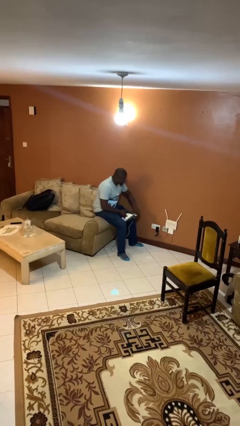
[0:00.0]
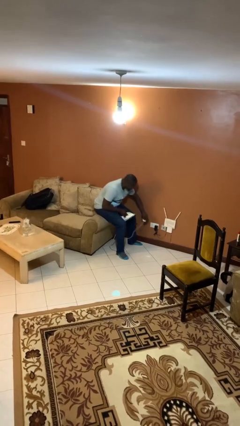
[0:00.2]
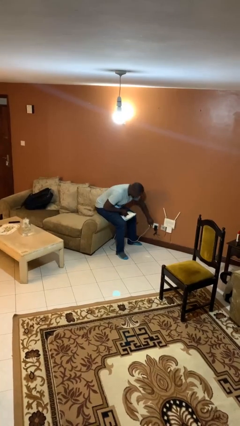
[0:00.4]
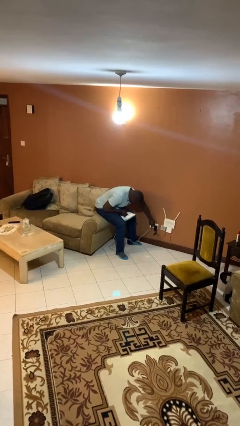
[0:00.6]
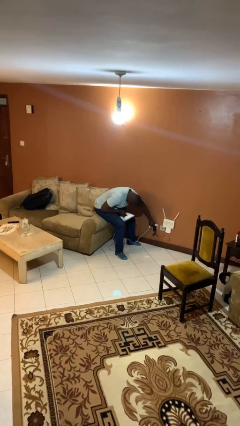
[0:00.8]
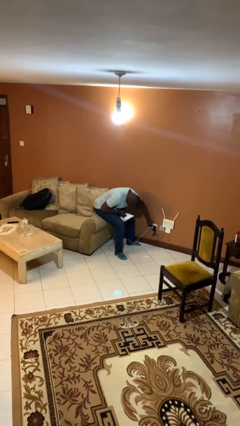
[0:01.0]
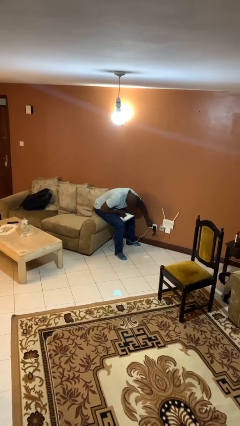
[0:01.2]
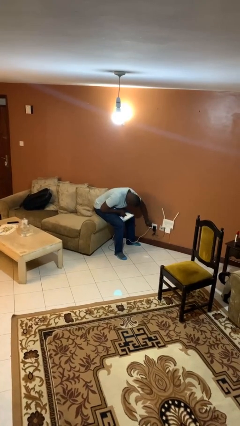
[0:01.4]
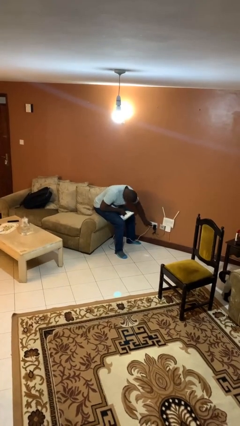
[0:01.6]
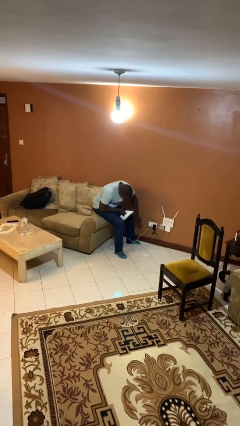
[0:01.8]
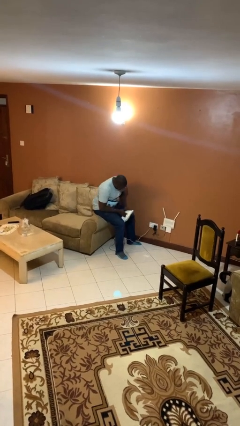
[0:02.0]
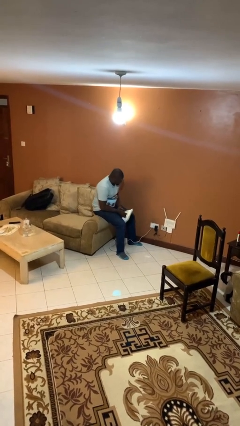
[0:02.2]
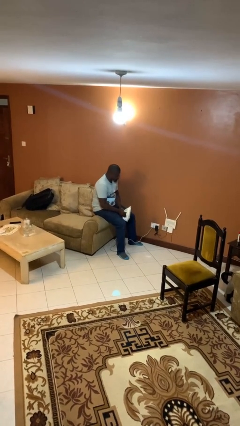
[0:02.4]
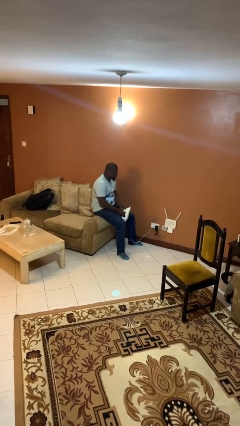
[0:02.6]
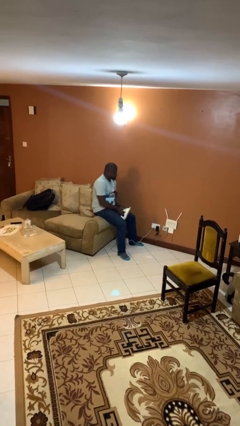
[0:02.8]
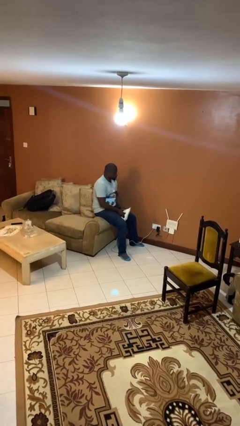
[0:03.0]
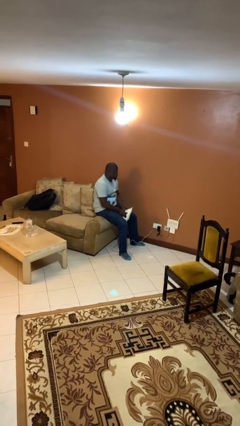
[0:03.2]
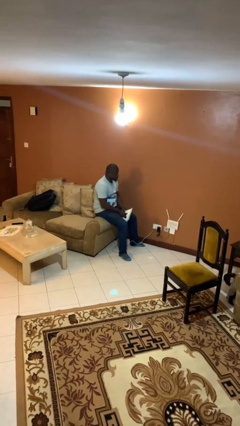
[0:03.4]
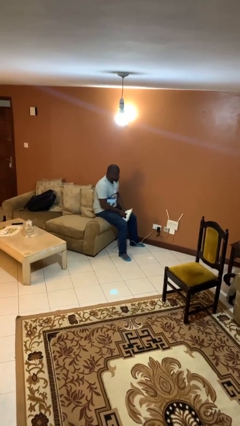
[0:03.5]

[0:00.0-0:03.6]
person plugs into electrical socket

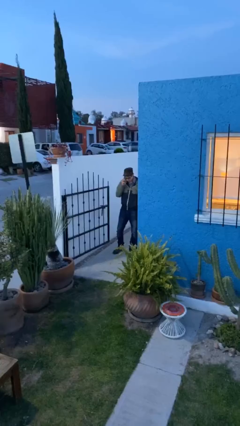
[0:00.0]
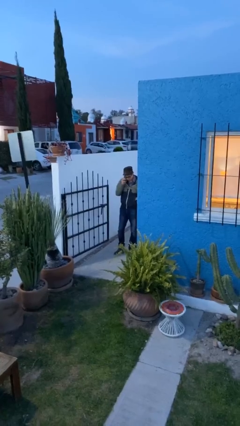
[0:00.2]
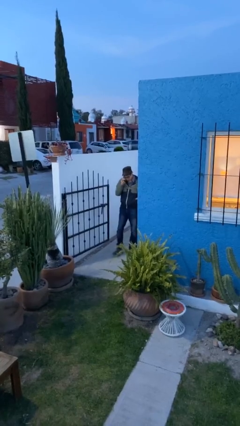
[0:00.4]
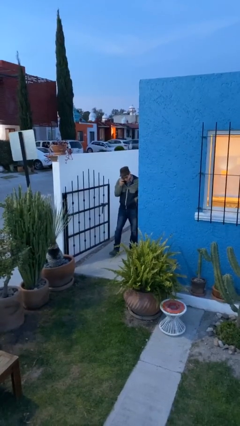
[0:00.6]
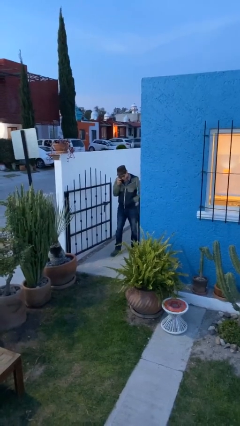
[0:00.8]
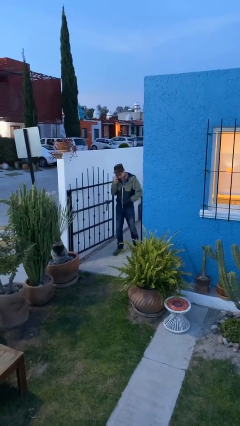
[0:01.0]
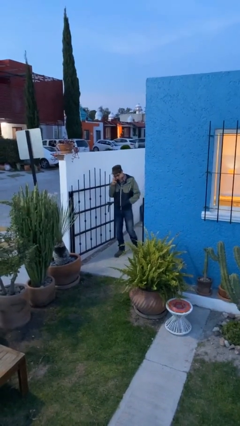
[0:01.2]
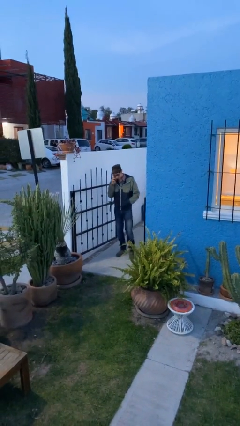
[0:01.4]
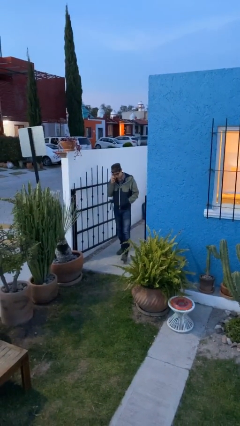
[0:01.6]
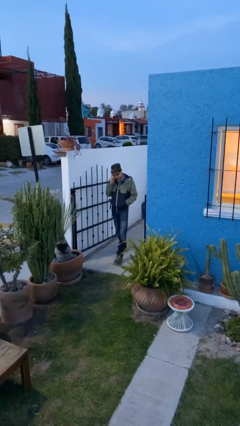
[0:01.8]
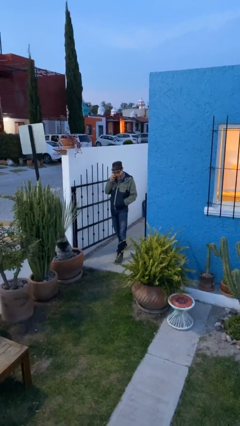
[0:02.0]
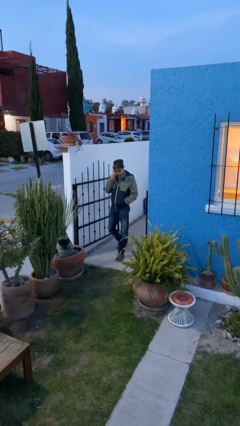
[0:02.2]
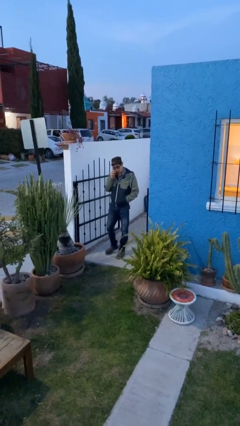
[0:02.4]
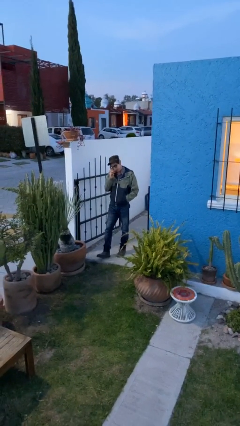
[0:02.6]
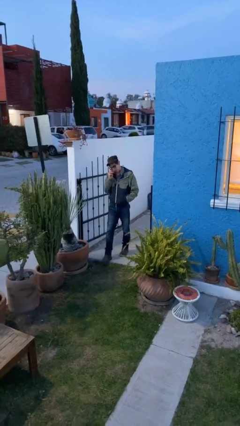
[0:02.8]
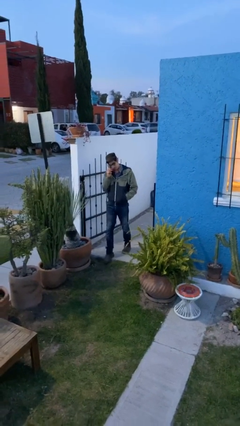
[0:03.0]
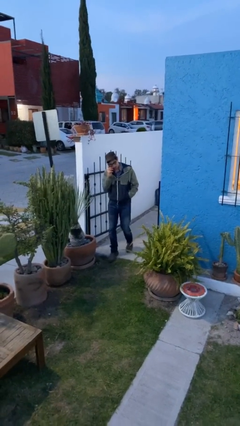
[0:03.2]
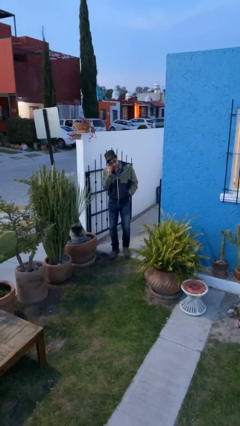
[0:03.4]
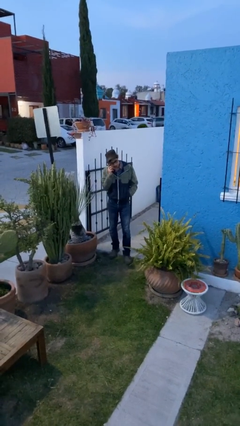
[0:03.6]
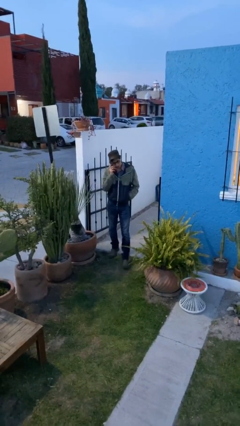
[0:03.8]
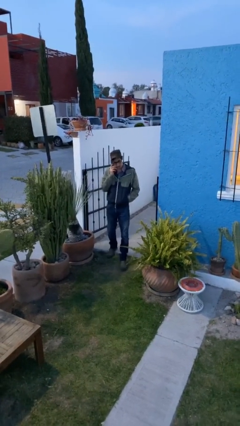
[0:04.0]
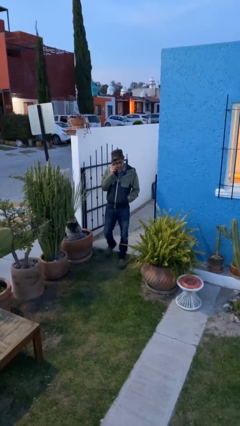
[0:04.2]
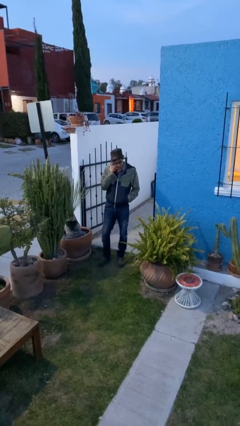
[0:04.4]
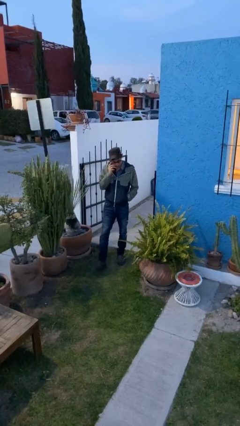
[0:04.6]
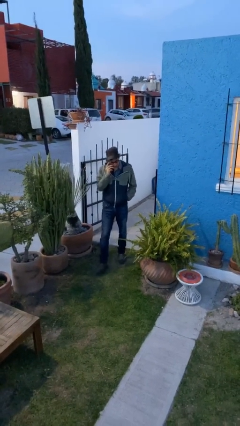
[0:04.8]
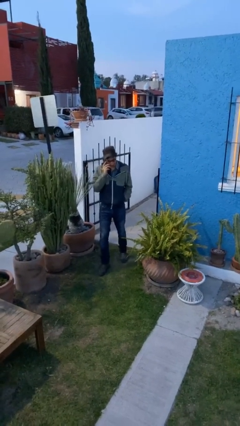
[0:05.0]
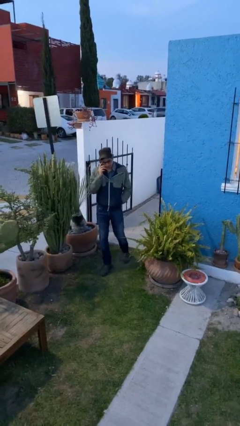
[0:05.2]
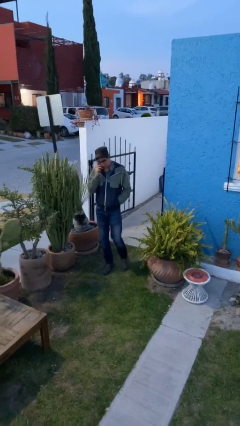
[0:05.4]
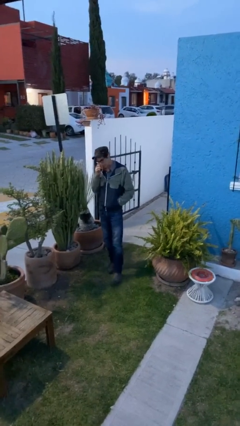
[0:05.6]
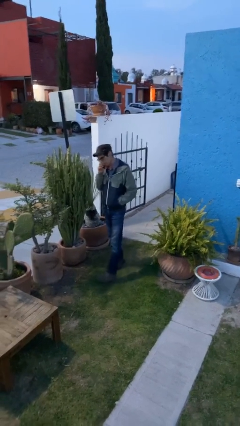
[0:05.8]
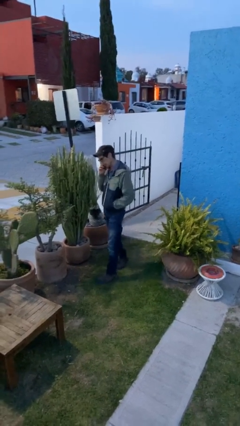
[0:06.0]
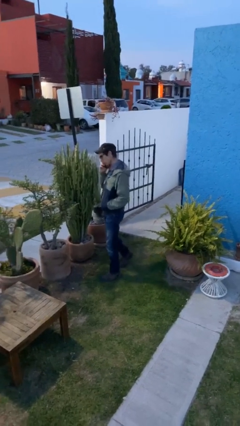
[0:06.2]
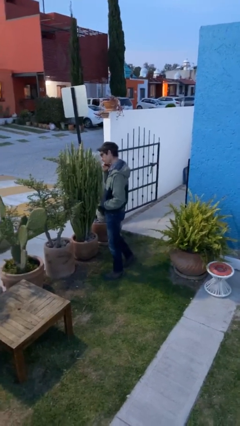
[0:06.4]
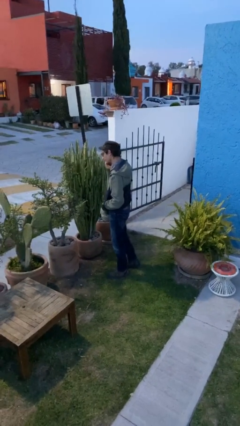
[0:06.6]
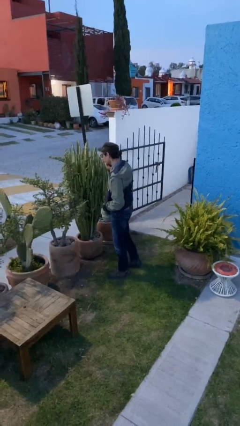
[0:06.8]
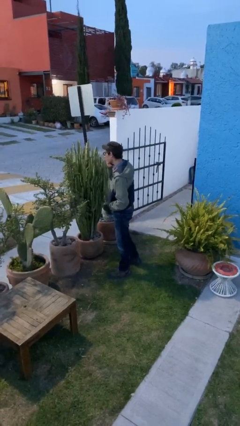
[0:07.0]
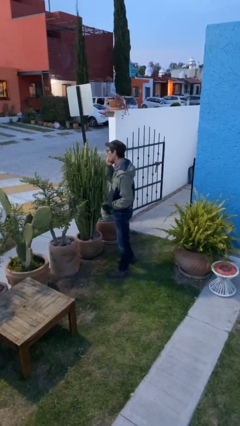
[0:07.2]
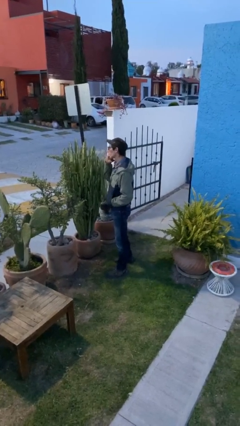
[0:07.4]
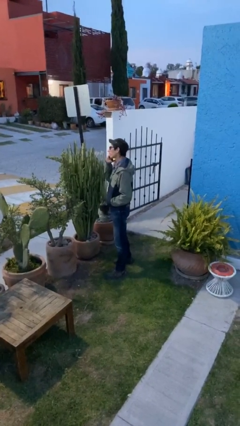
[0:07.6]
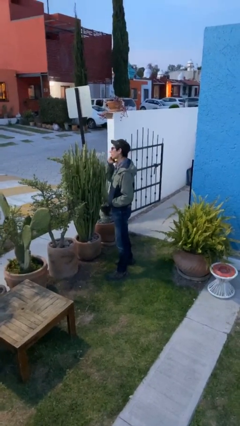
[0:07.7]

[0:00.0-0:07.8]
person enters scene through structure

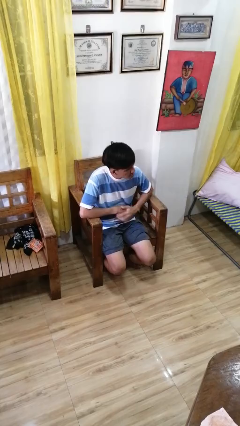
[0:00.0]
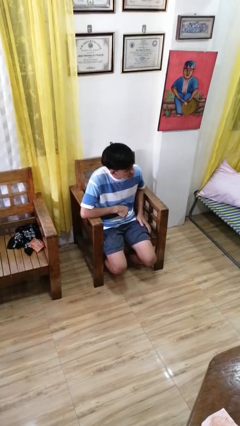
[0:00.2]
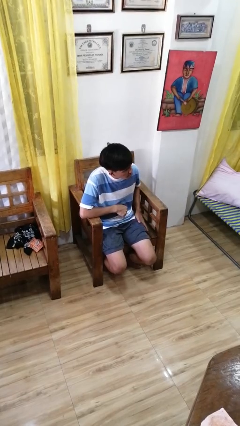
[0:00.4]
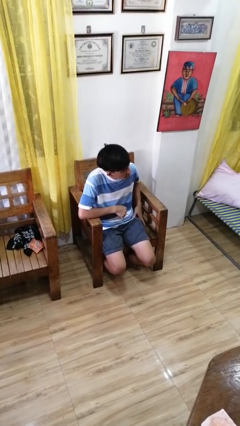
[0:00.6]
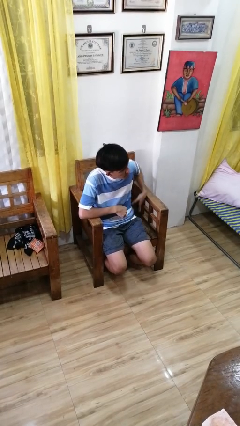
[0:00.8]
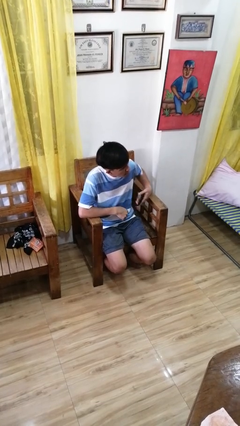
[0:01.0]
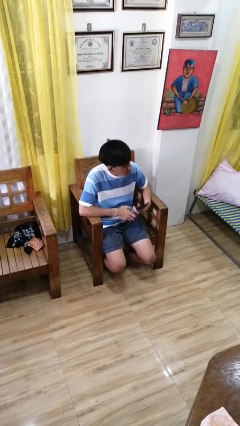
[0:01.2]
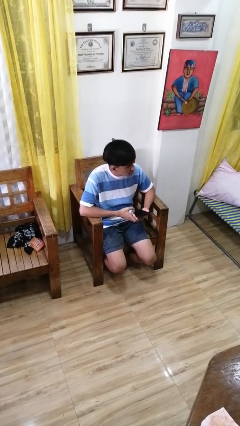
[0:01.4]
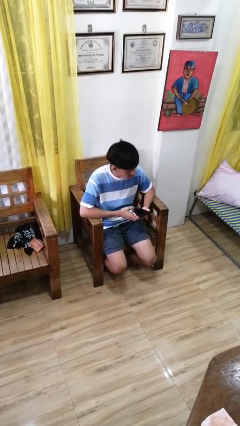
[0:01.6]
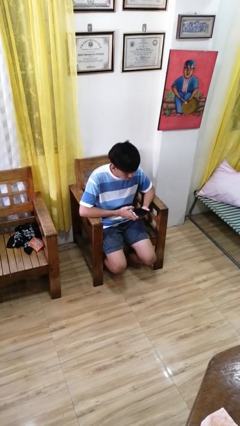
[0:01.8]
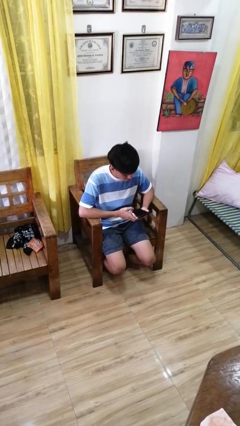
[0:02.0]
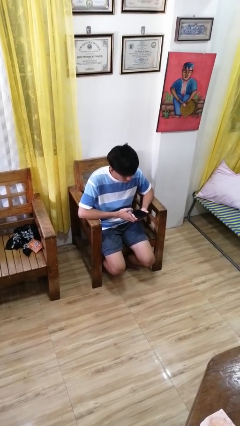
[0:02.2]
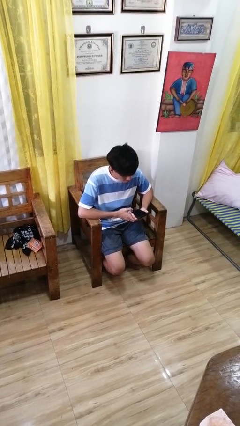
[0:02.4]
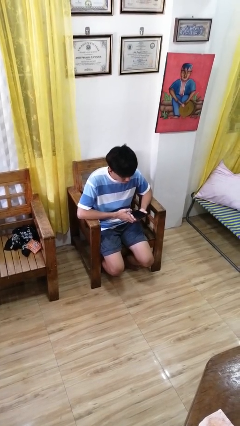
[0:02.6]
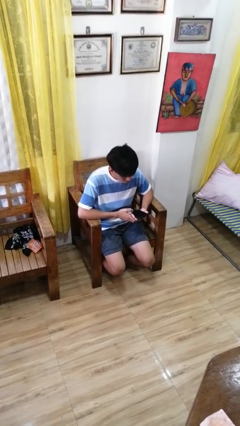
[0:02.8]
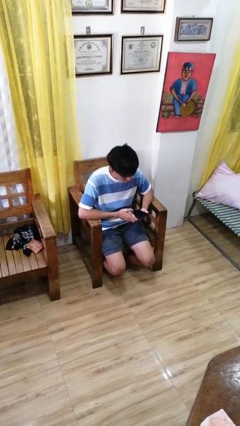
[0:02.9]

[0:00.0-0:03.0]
person takes phone from pocket

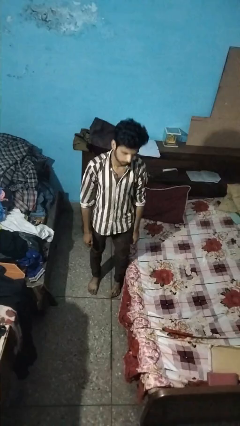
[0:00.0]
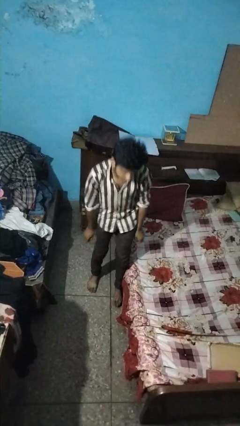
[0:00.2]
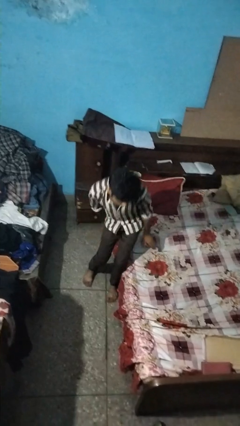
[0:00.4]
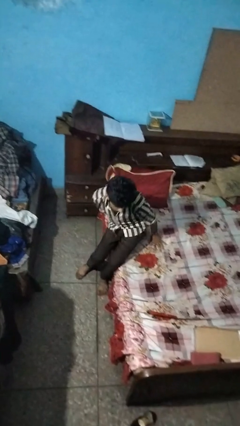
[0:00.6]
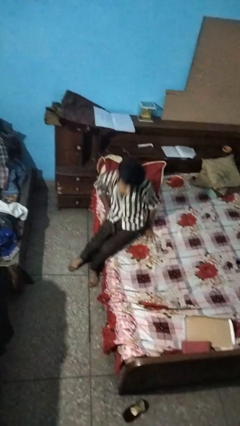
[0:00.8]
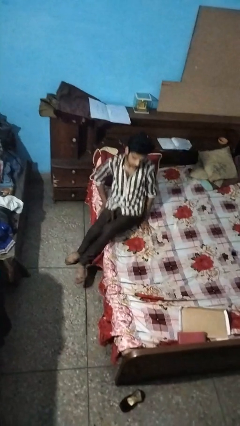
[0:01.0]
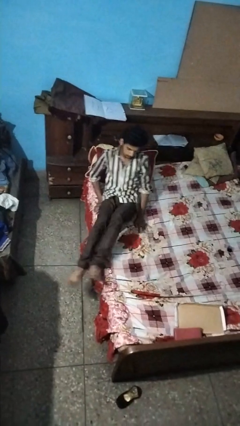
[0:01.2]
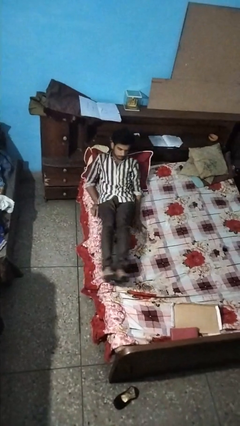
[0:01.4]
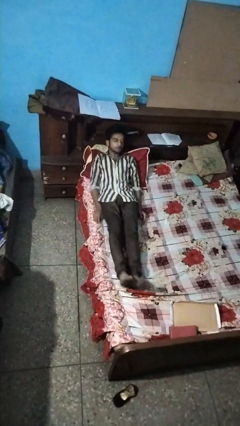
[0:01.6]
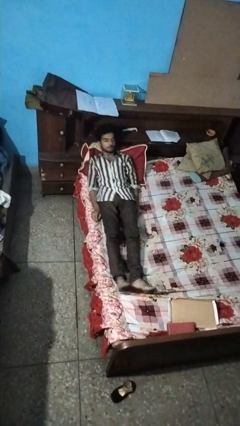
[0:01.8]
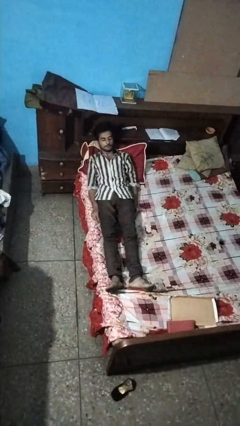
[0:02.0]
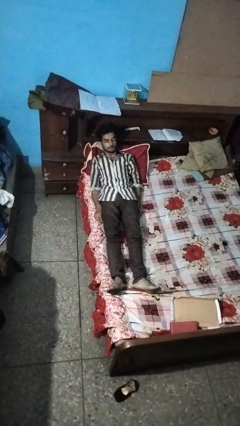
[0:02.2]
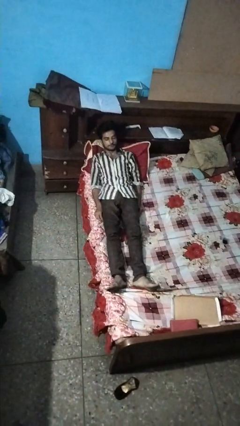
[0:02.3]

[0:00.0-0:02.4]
person lies down on bed

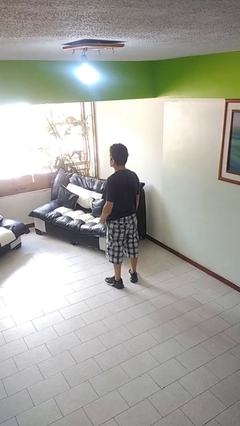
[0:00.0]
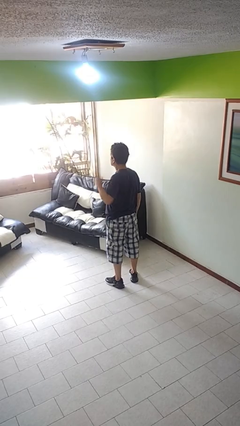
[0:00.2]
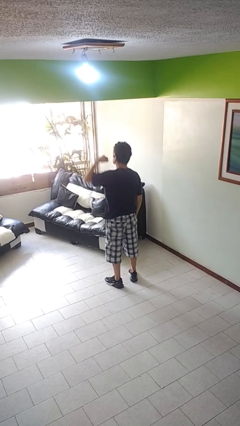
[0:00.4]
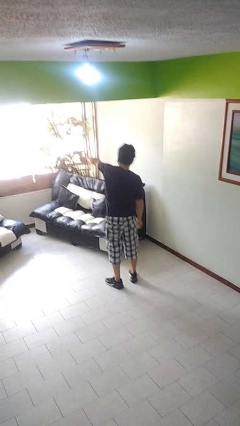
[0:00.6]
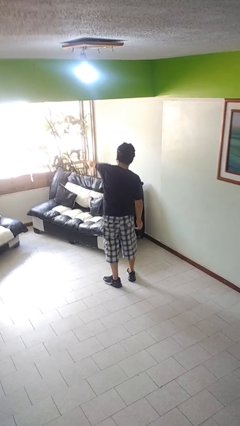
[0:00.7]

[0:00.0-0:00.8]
person punches
